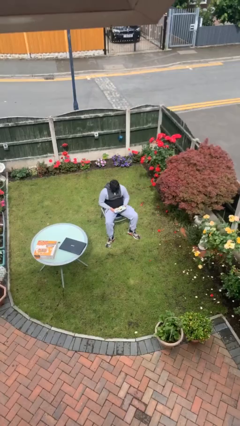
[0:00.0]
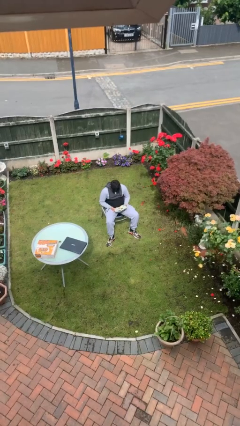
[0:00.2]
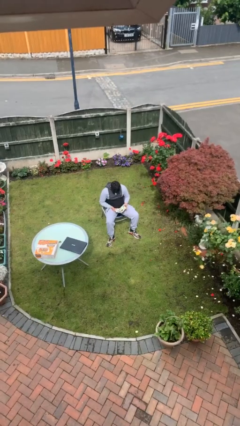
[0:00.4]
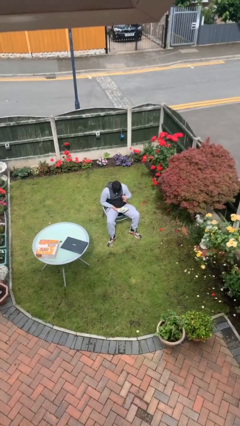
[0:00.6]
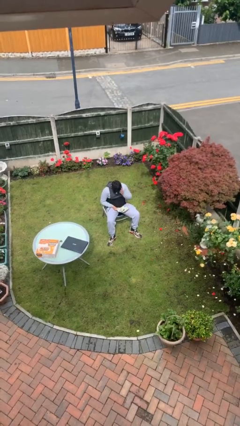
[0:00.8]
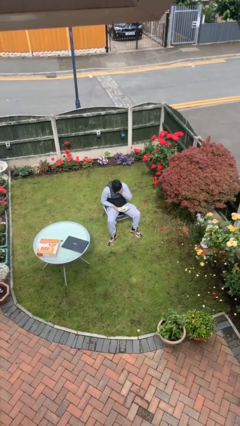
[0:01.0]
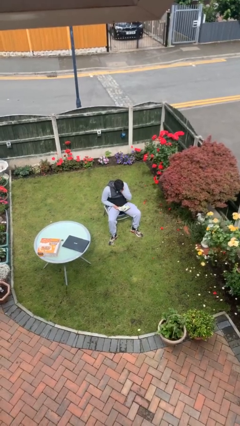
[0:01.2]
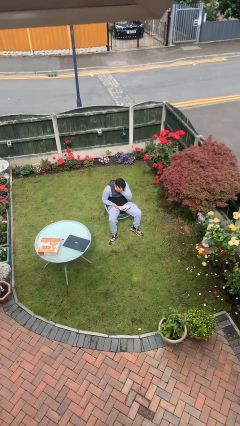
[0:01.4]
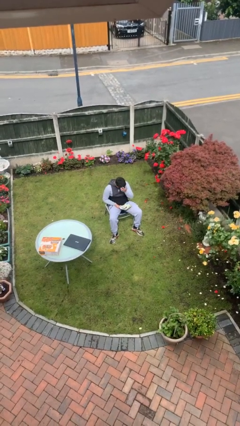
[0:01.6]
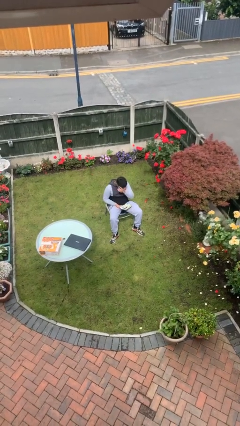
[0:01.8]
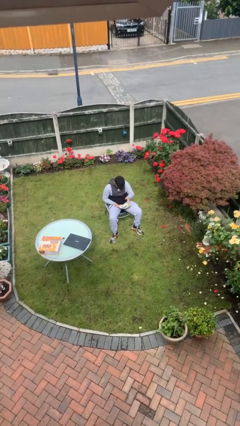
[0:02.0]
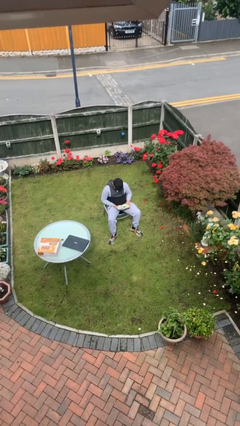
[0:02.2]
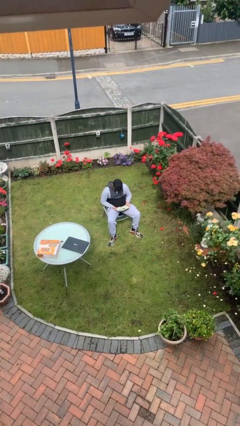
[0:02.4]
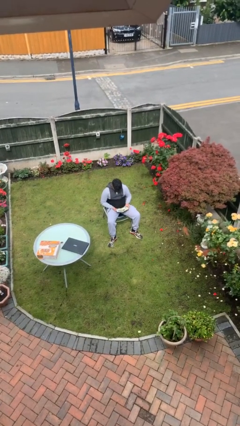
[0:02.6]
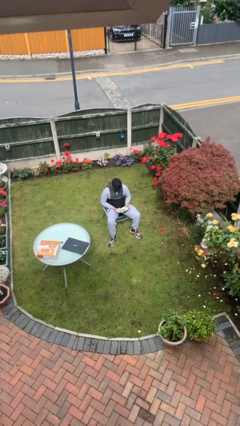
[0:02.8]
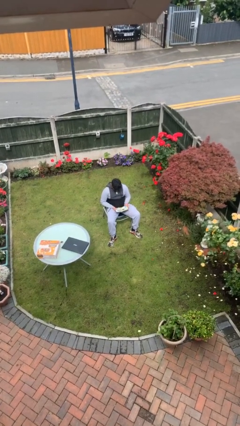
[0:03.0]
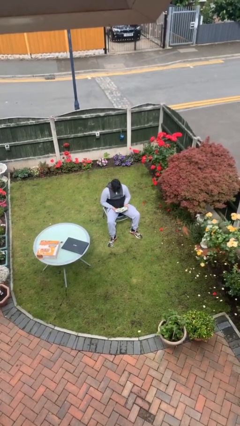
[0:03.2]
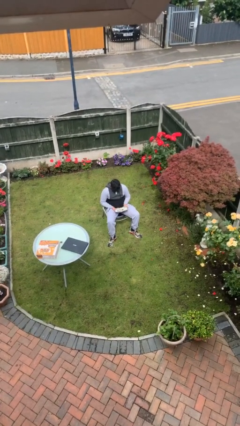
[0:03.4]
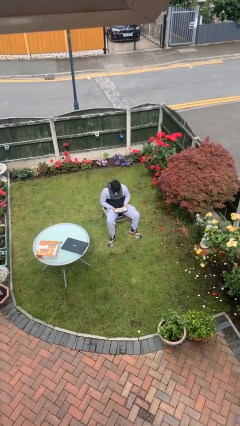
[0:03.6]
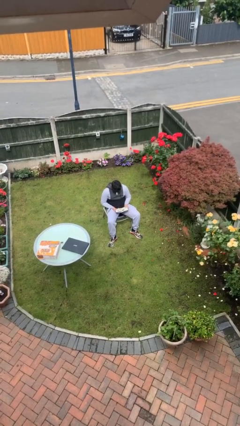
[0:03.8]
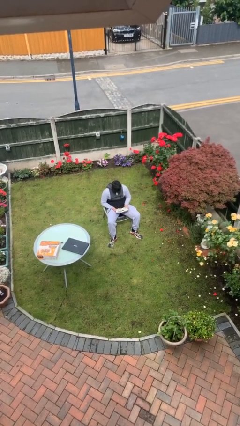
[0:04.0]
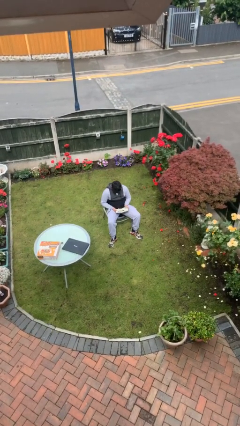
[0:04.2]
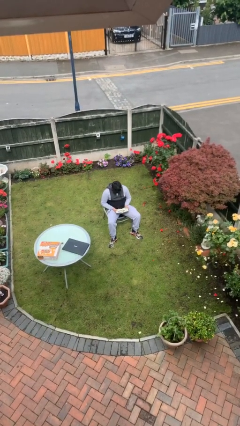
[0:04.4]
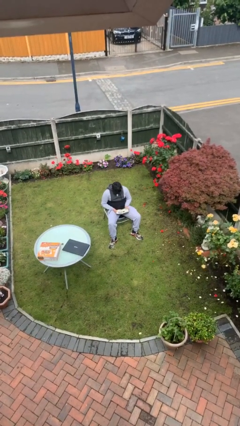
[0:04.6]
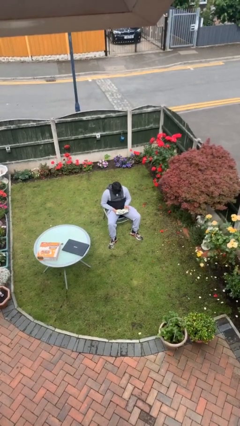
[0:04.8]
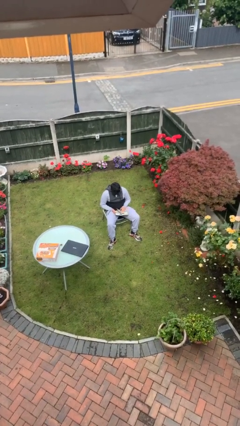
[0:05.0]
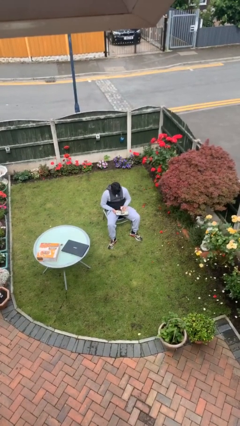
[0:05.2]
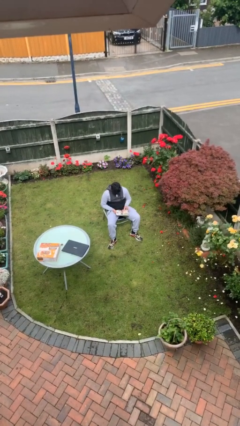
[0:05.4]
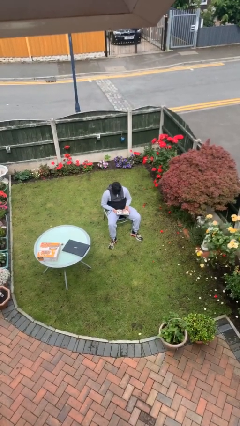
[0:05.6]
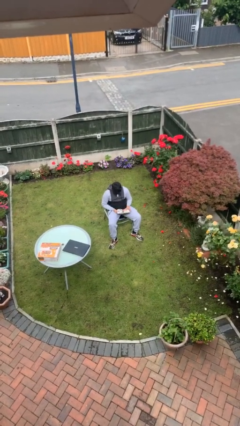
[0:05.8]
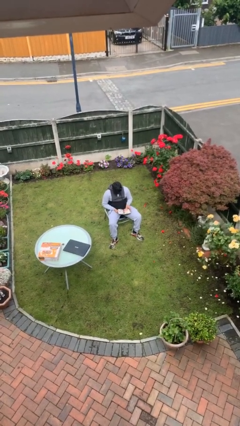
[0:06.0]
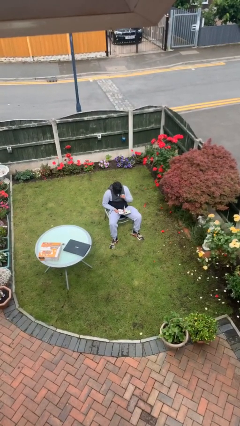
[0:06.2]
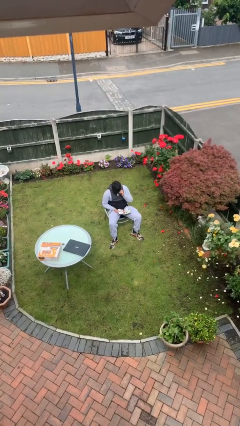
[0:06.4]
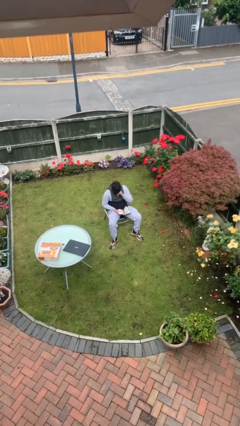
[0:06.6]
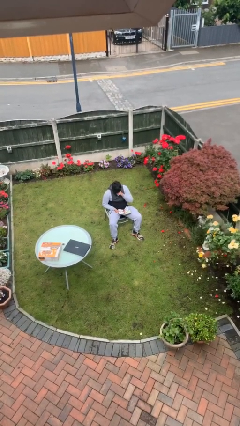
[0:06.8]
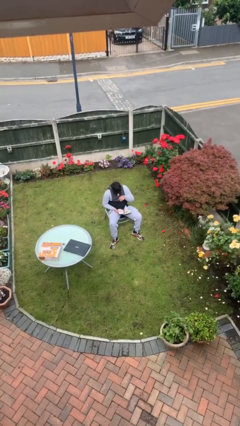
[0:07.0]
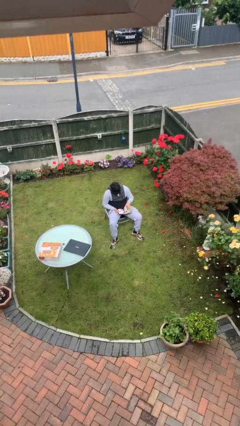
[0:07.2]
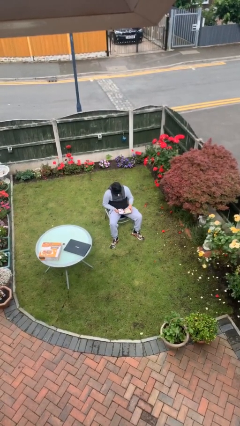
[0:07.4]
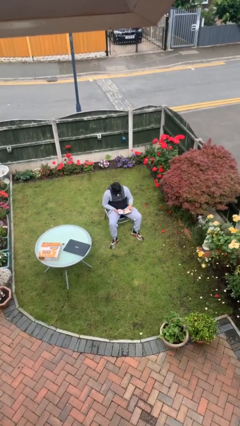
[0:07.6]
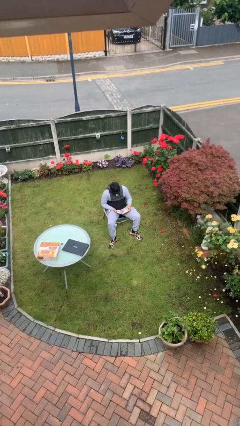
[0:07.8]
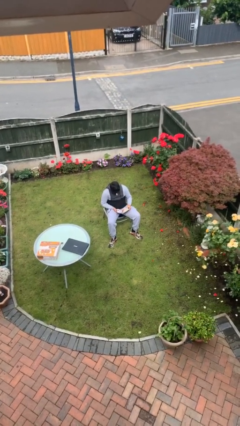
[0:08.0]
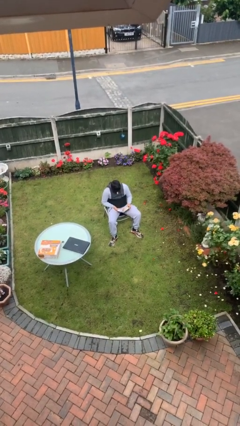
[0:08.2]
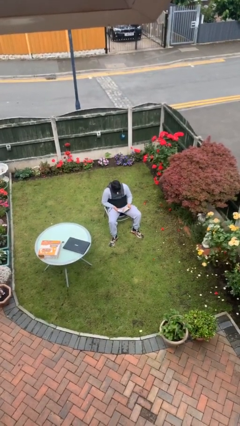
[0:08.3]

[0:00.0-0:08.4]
person reads document

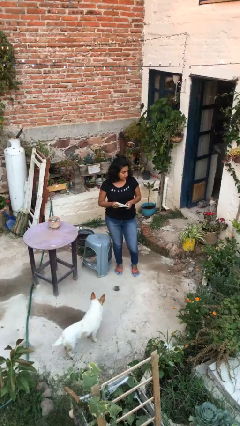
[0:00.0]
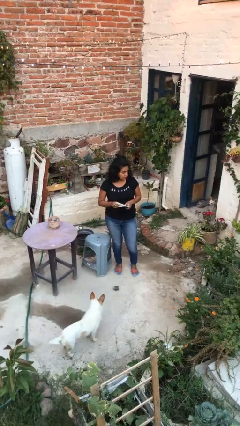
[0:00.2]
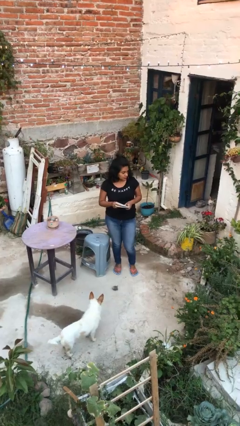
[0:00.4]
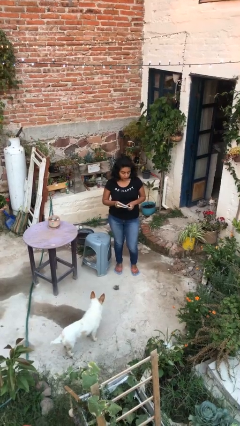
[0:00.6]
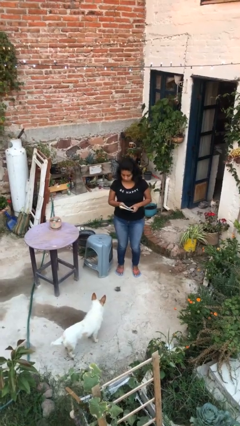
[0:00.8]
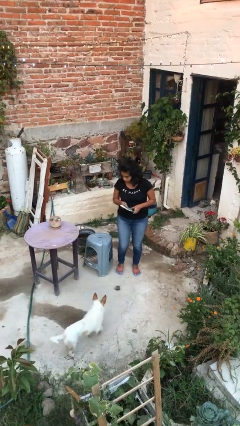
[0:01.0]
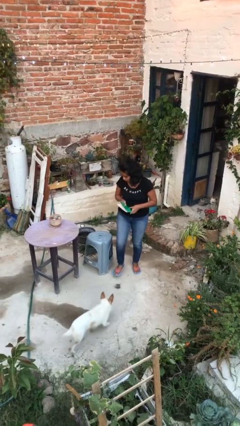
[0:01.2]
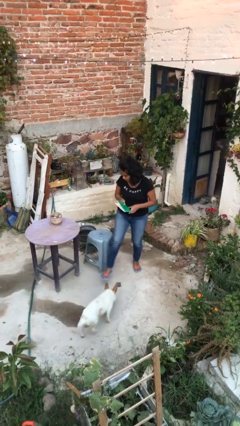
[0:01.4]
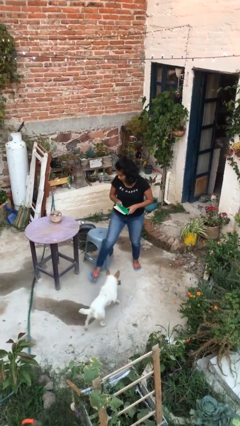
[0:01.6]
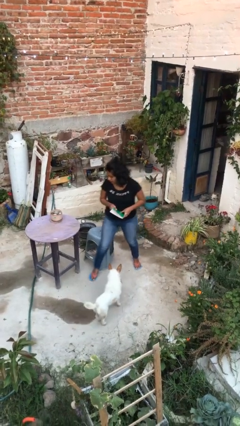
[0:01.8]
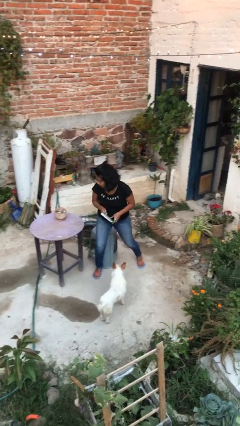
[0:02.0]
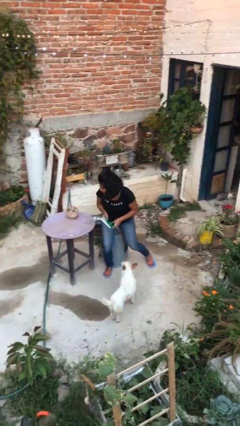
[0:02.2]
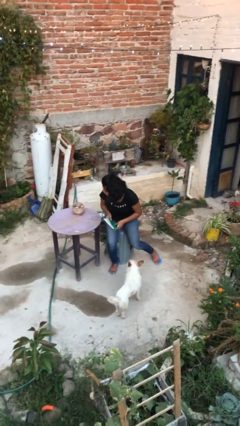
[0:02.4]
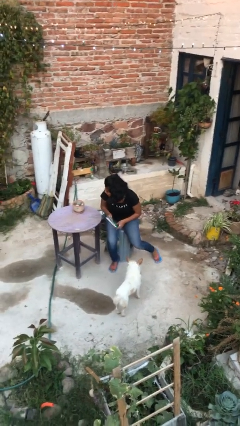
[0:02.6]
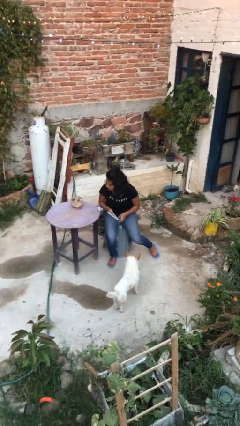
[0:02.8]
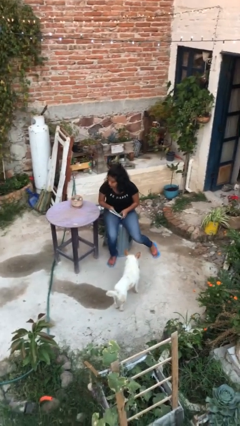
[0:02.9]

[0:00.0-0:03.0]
person sits down

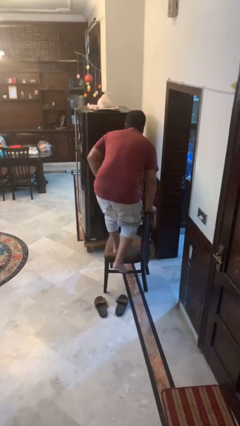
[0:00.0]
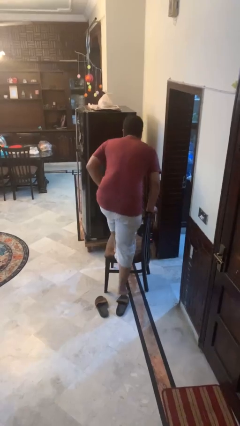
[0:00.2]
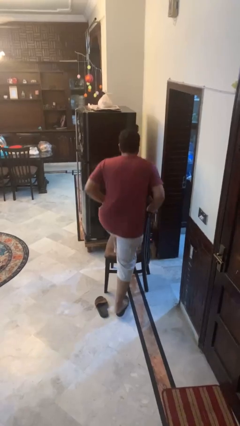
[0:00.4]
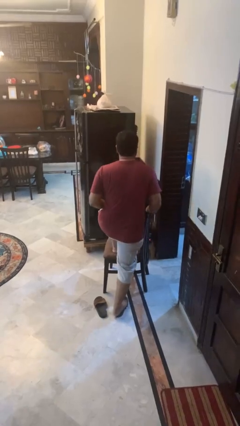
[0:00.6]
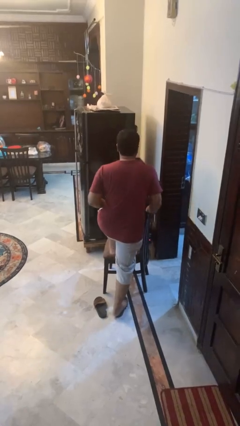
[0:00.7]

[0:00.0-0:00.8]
person climbs off chair

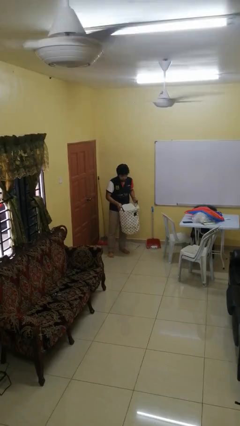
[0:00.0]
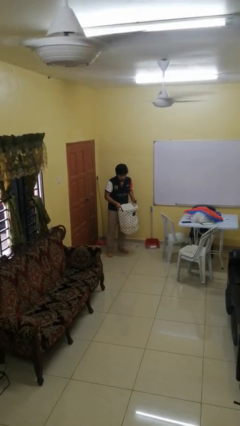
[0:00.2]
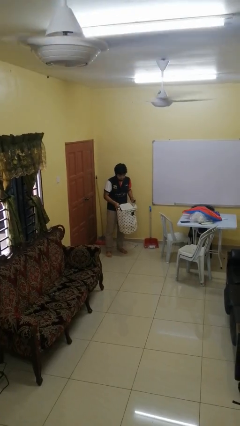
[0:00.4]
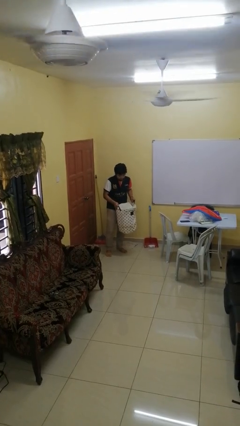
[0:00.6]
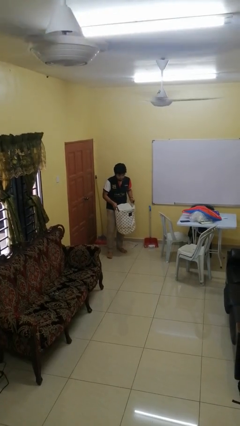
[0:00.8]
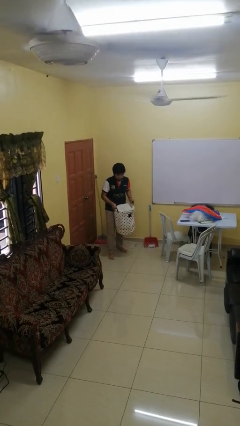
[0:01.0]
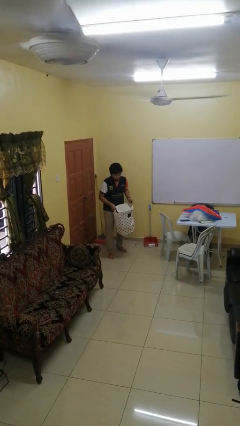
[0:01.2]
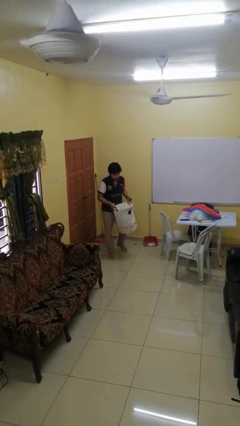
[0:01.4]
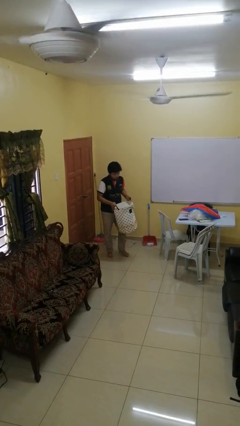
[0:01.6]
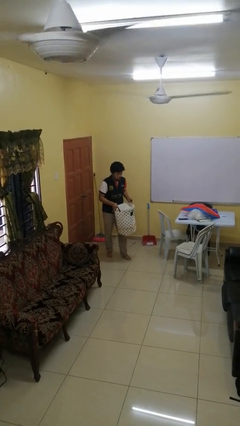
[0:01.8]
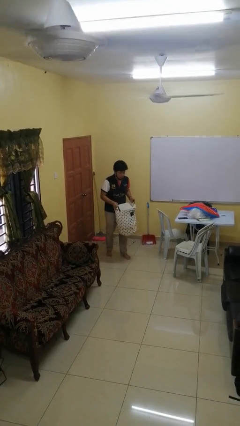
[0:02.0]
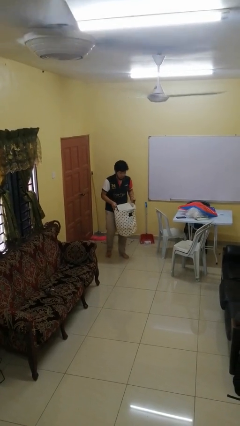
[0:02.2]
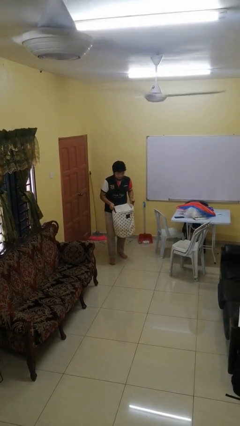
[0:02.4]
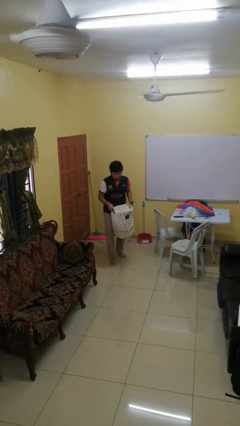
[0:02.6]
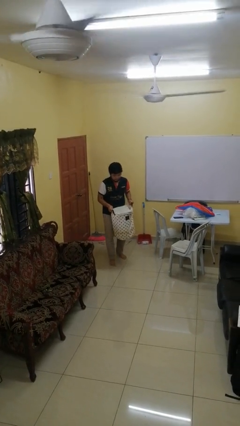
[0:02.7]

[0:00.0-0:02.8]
person carries laundry basket

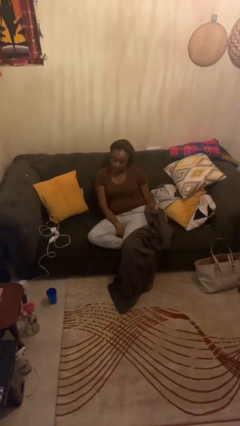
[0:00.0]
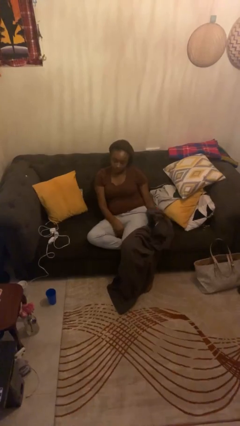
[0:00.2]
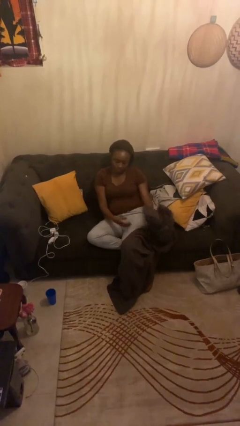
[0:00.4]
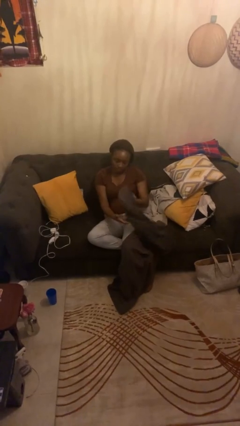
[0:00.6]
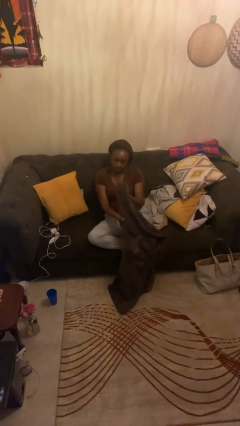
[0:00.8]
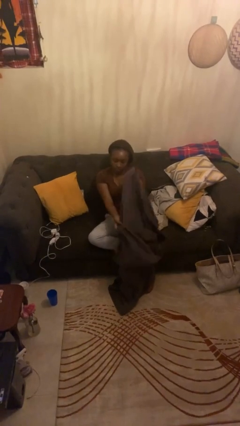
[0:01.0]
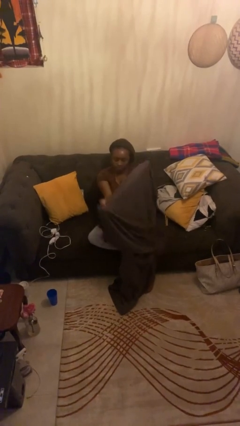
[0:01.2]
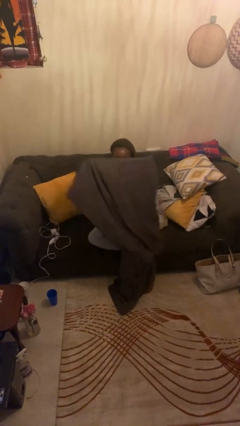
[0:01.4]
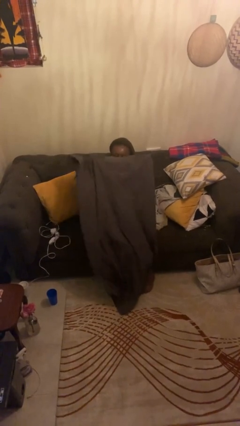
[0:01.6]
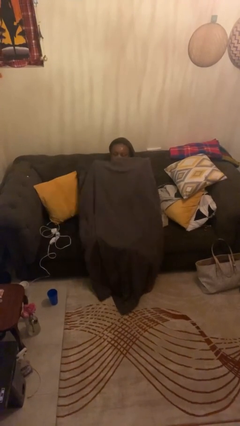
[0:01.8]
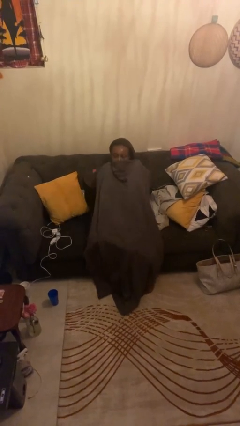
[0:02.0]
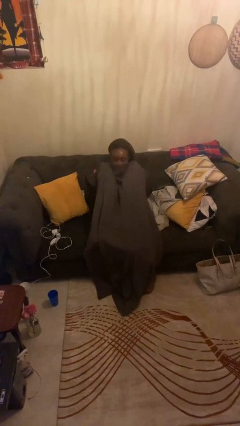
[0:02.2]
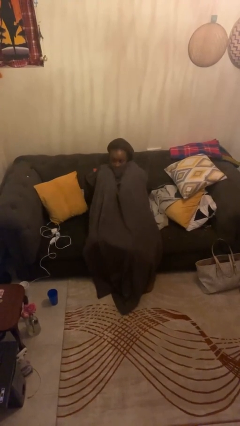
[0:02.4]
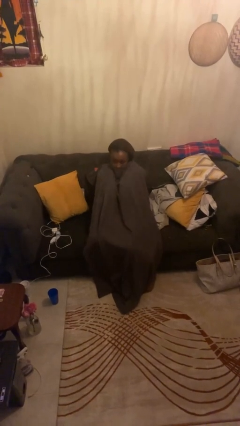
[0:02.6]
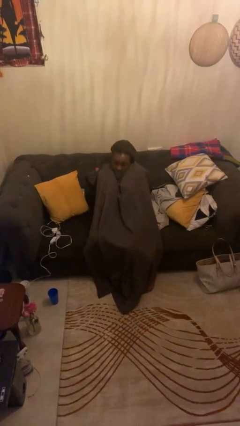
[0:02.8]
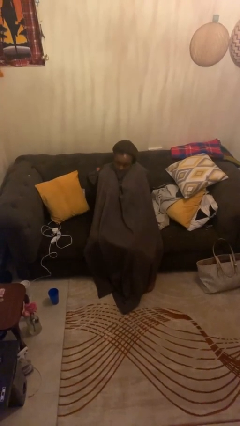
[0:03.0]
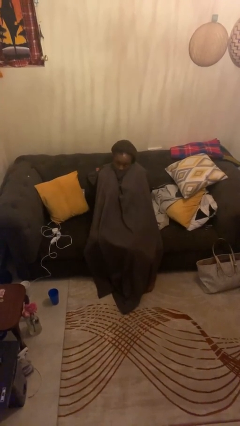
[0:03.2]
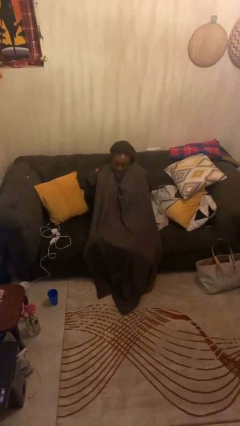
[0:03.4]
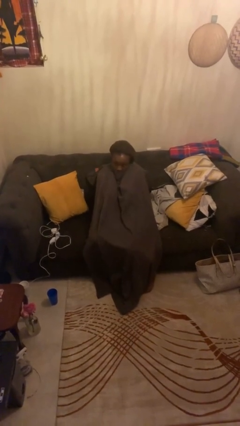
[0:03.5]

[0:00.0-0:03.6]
person covers with blanket
